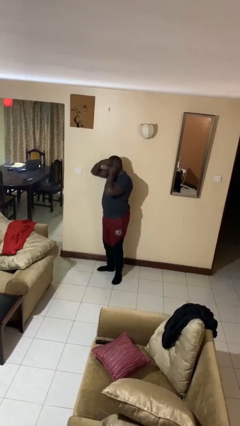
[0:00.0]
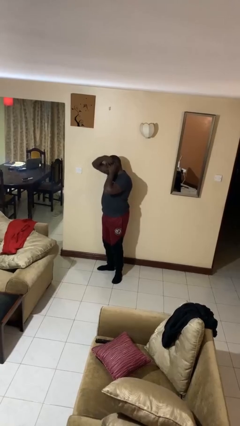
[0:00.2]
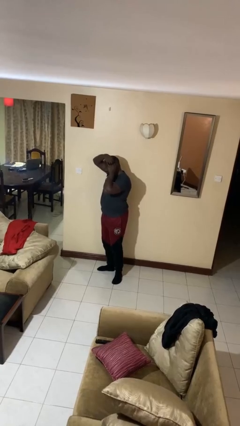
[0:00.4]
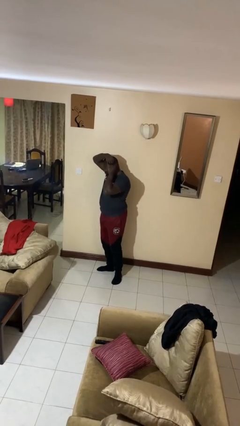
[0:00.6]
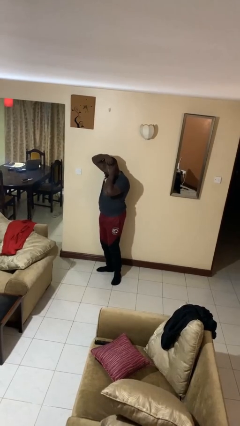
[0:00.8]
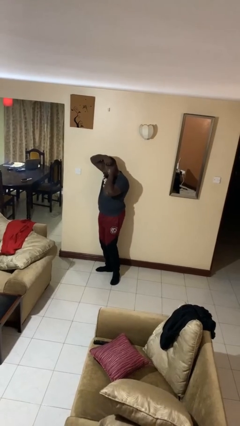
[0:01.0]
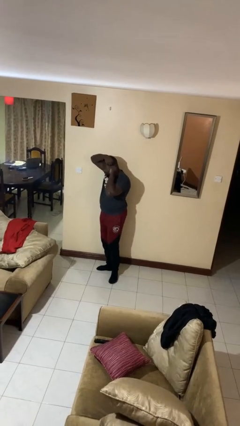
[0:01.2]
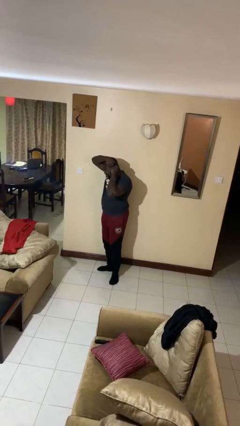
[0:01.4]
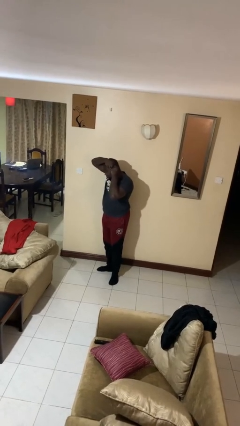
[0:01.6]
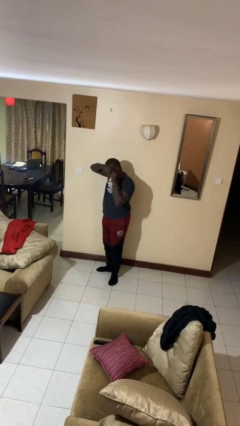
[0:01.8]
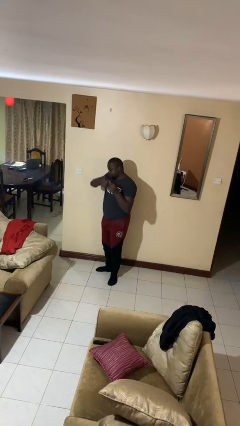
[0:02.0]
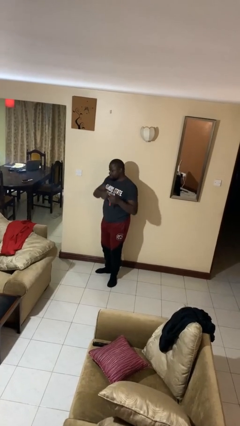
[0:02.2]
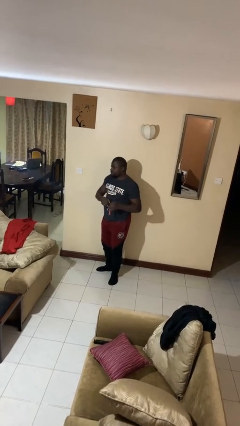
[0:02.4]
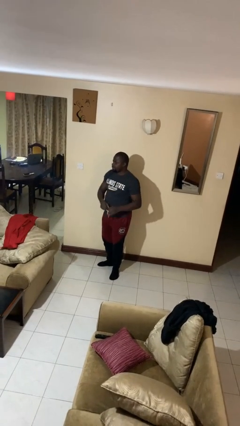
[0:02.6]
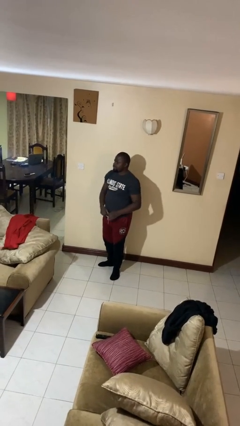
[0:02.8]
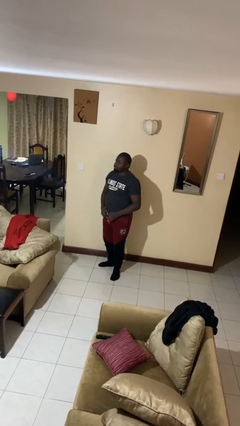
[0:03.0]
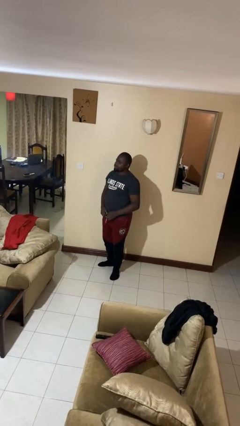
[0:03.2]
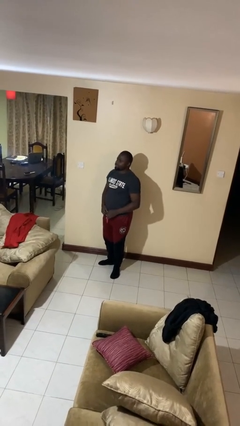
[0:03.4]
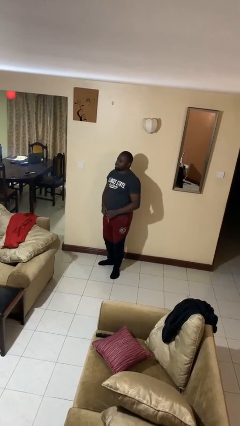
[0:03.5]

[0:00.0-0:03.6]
person takes off earrings

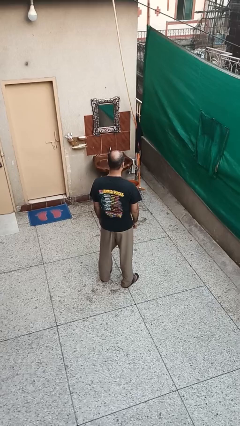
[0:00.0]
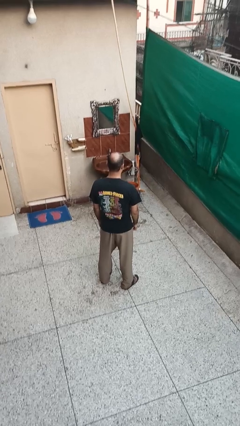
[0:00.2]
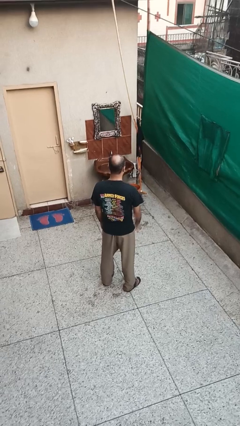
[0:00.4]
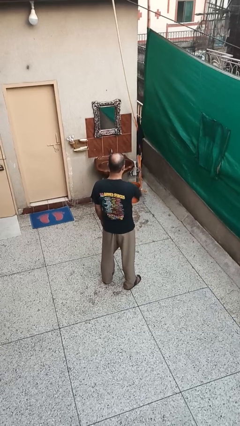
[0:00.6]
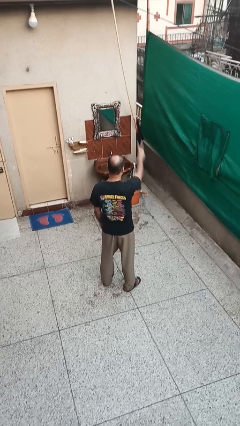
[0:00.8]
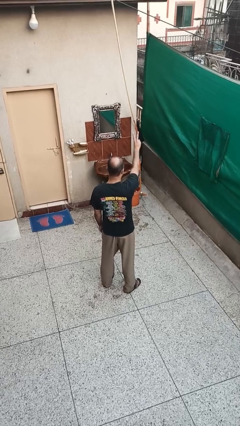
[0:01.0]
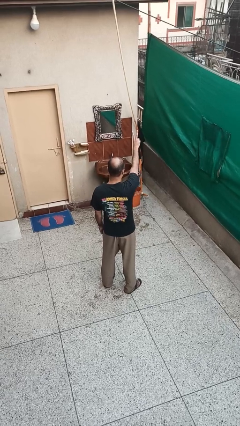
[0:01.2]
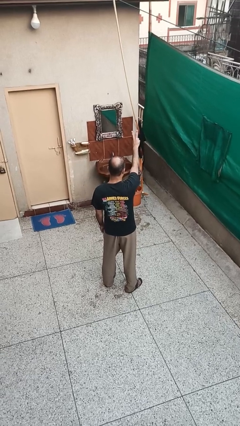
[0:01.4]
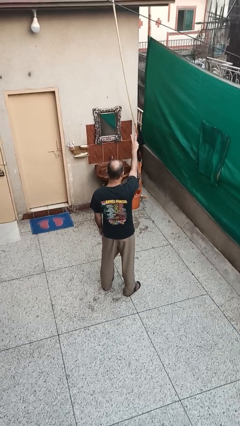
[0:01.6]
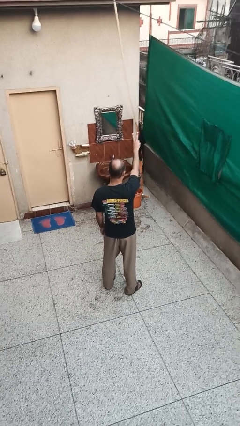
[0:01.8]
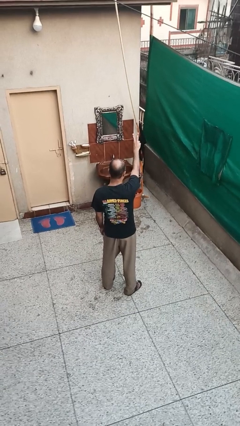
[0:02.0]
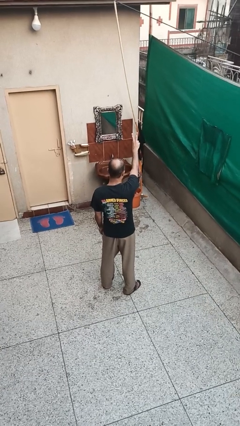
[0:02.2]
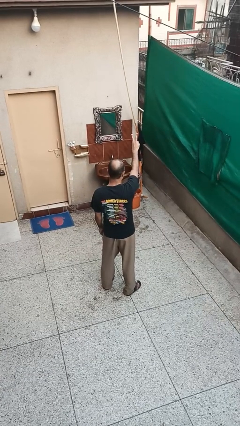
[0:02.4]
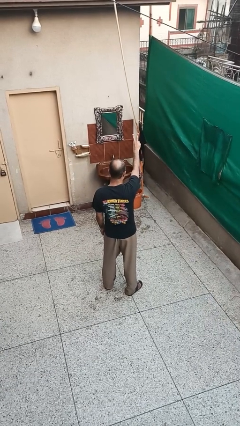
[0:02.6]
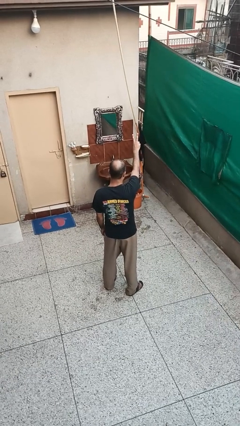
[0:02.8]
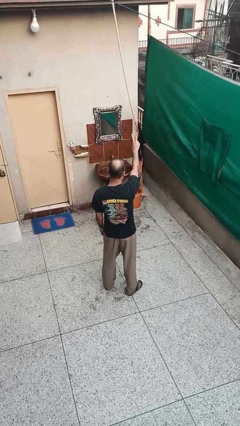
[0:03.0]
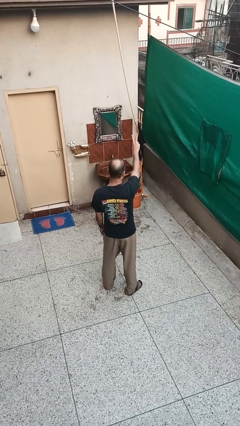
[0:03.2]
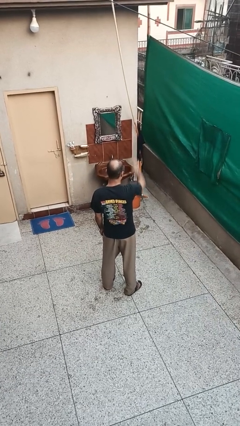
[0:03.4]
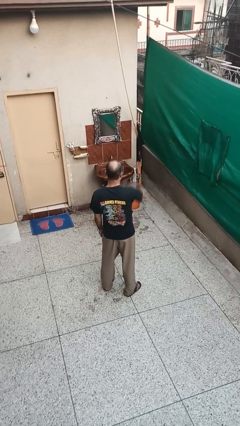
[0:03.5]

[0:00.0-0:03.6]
person gestures peace

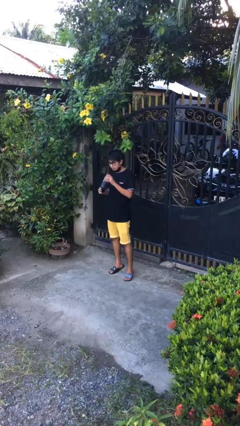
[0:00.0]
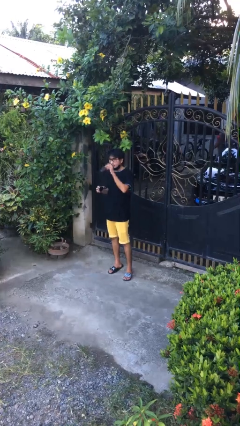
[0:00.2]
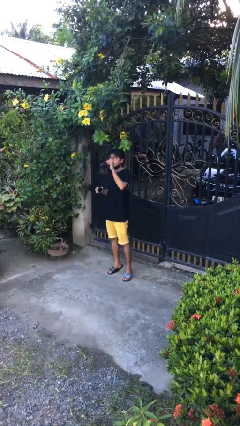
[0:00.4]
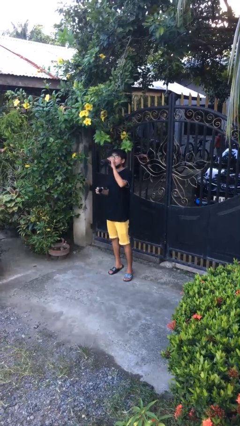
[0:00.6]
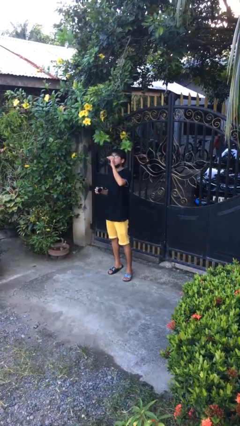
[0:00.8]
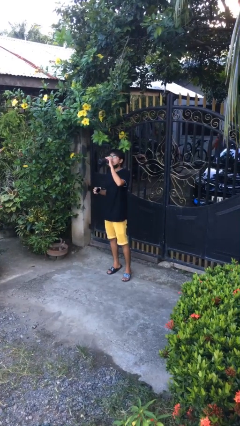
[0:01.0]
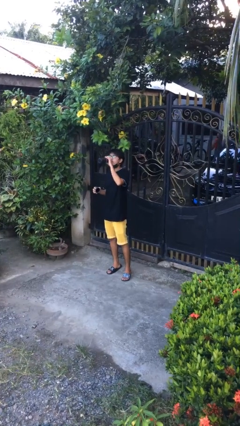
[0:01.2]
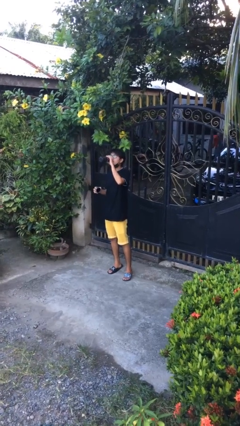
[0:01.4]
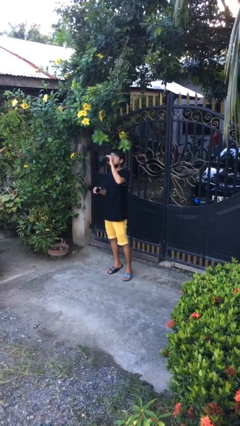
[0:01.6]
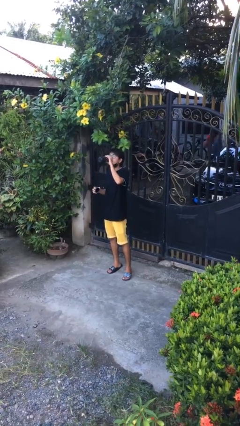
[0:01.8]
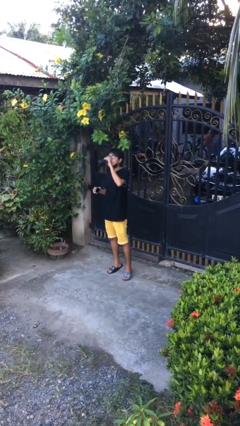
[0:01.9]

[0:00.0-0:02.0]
person drinks from bottle

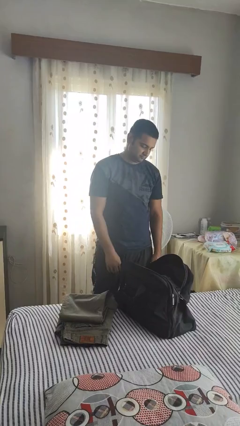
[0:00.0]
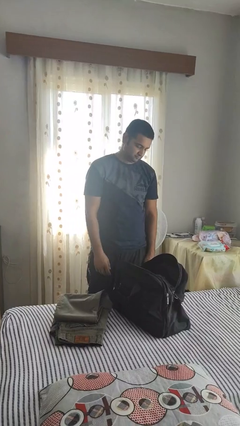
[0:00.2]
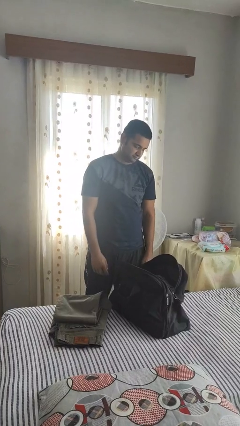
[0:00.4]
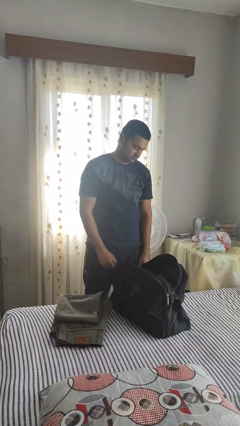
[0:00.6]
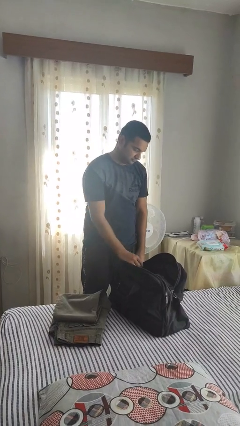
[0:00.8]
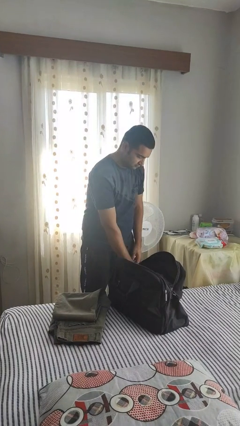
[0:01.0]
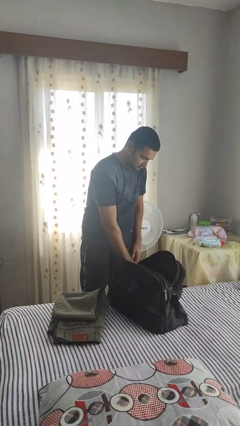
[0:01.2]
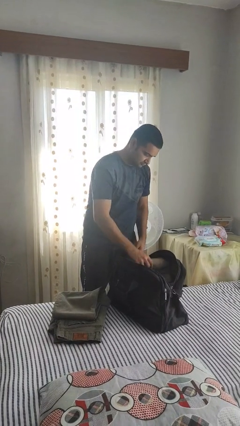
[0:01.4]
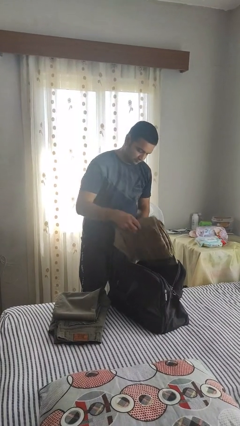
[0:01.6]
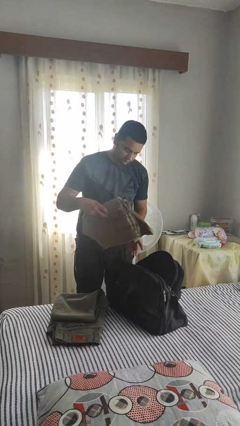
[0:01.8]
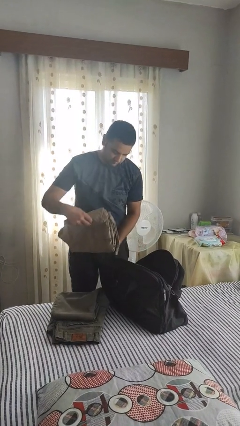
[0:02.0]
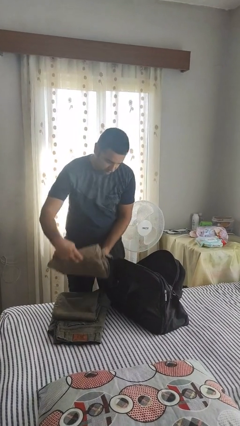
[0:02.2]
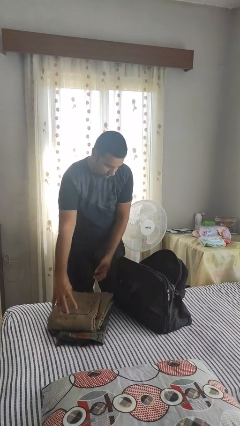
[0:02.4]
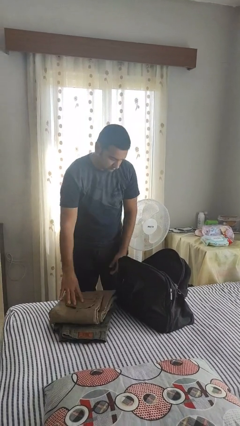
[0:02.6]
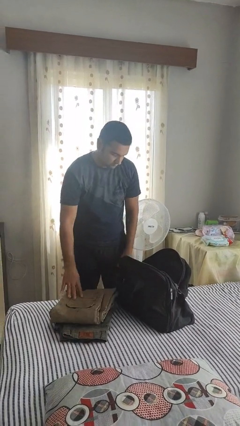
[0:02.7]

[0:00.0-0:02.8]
person unloads clothes from suitcase

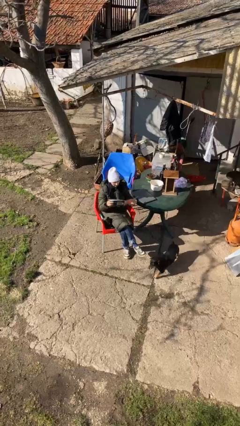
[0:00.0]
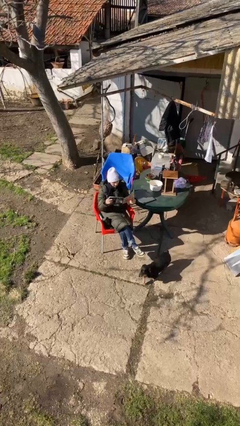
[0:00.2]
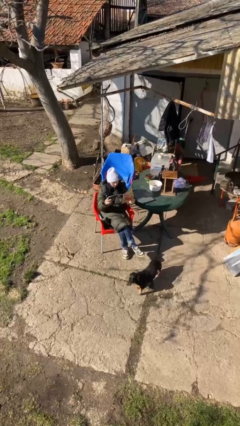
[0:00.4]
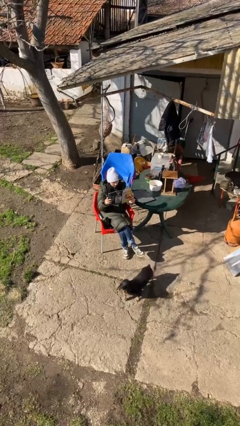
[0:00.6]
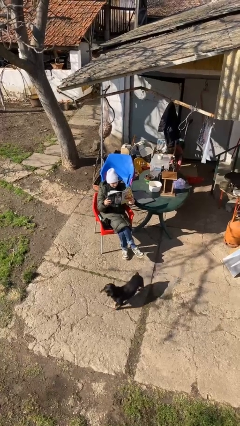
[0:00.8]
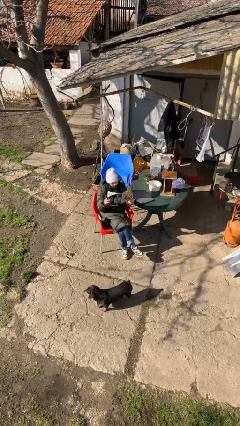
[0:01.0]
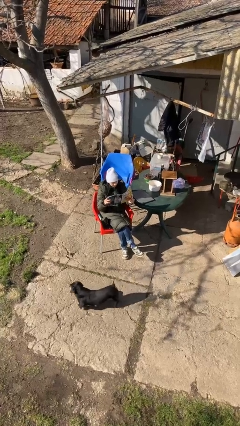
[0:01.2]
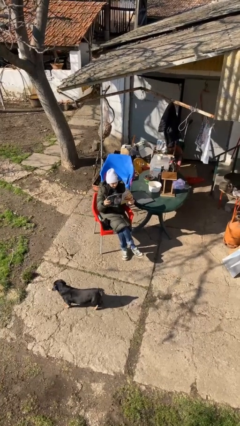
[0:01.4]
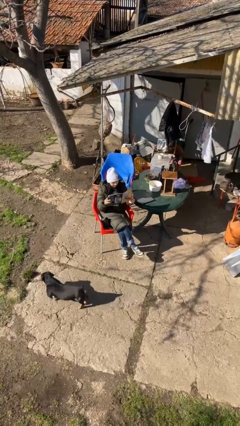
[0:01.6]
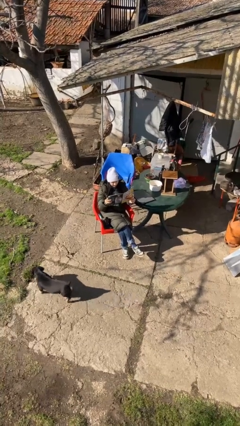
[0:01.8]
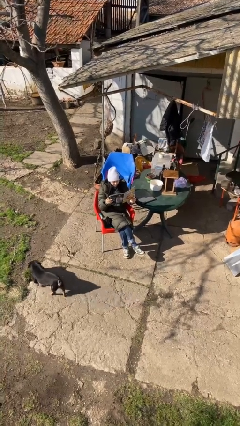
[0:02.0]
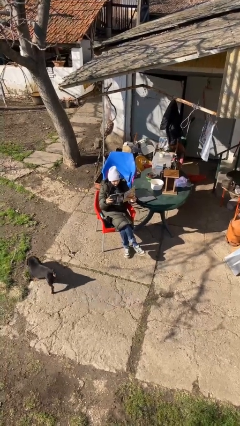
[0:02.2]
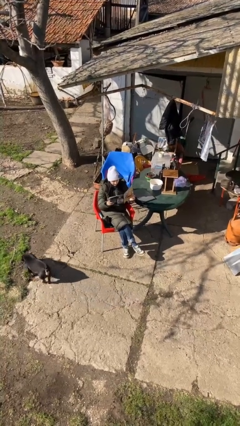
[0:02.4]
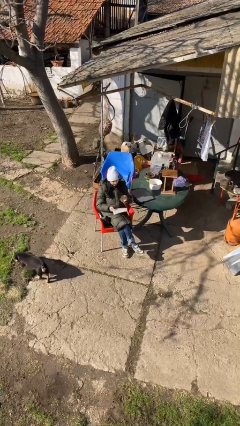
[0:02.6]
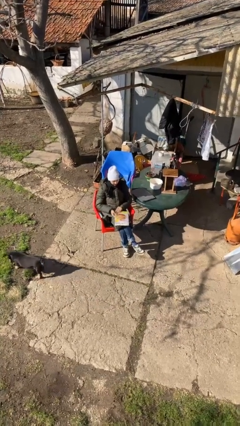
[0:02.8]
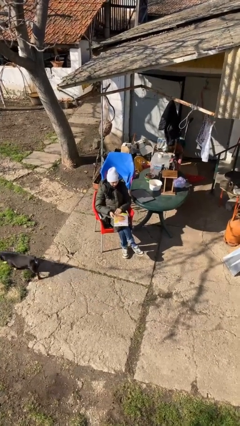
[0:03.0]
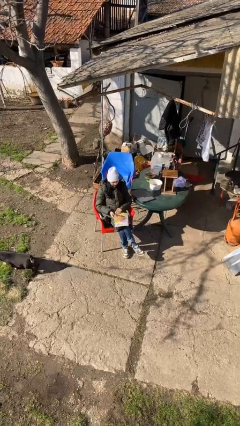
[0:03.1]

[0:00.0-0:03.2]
person reads document

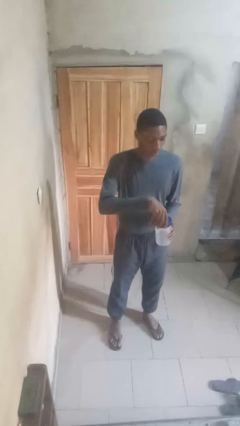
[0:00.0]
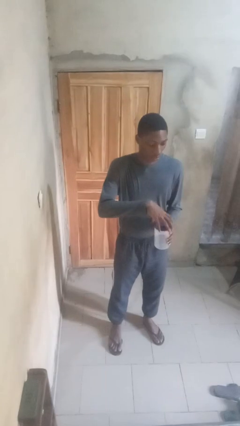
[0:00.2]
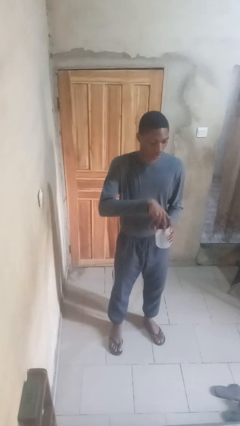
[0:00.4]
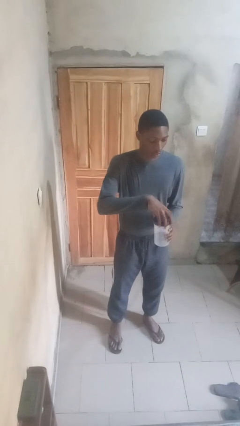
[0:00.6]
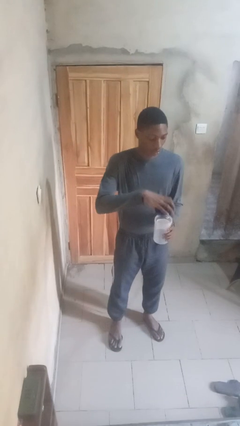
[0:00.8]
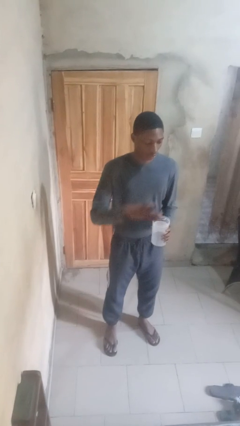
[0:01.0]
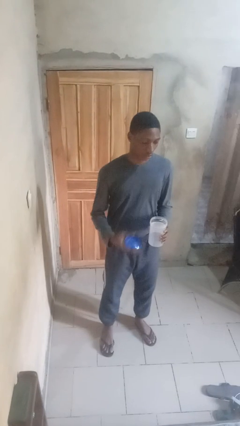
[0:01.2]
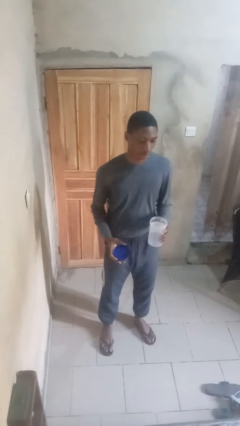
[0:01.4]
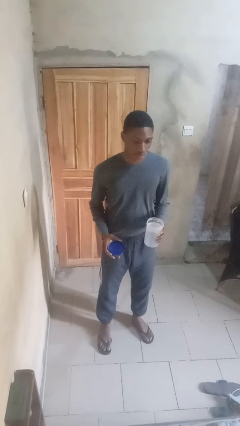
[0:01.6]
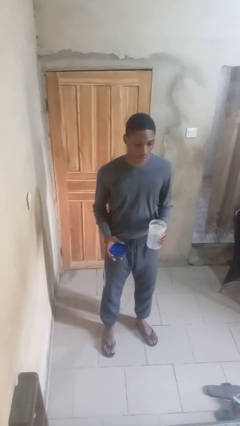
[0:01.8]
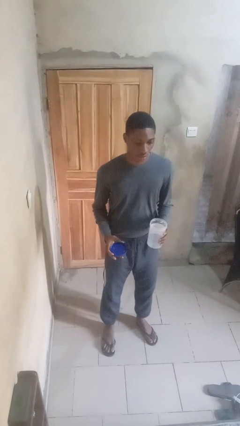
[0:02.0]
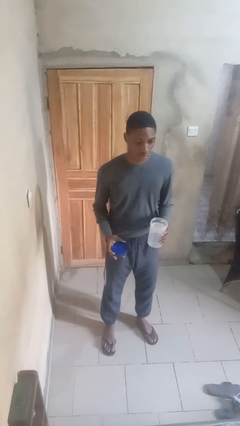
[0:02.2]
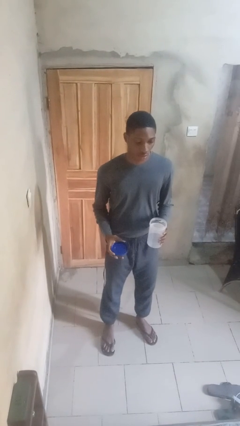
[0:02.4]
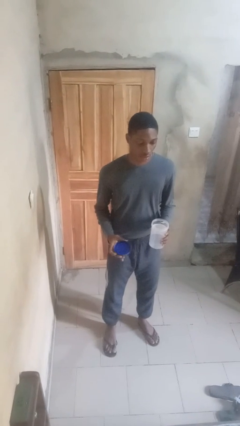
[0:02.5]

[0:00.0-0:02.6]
person opens jar
